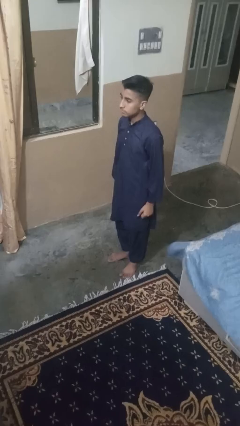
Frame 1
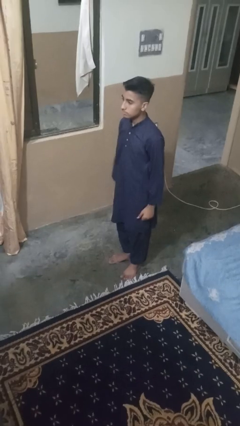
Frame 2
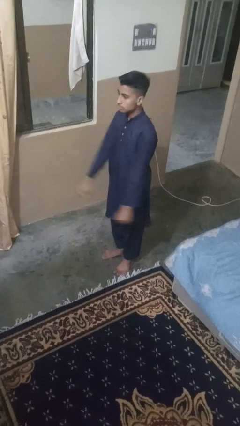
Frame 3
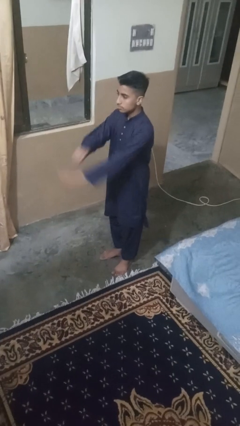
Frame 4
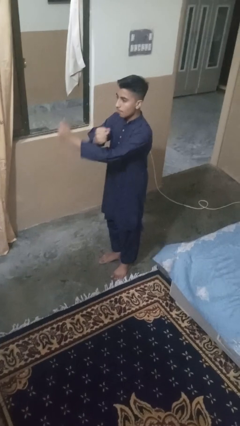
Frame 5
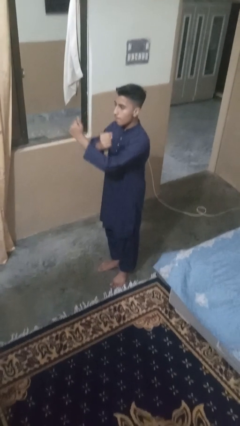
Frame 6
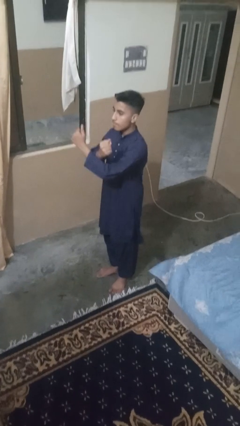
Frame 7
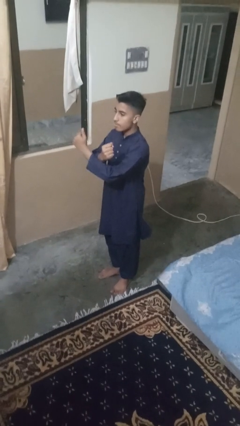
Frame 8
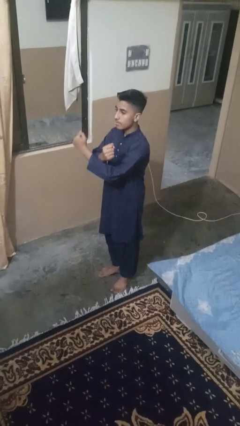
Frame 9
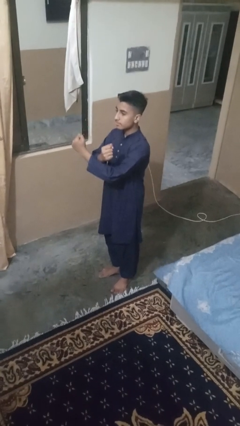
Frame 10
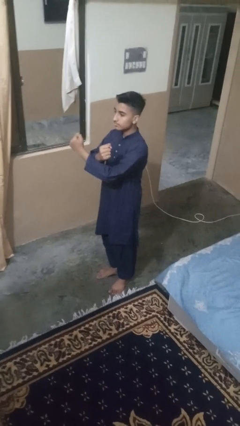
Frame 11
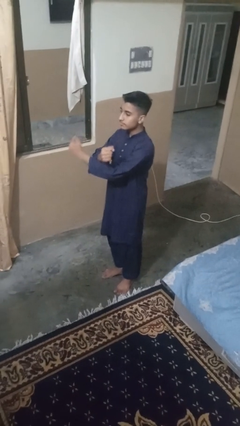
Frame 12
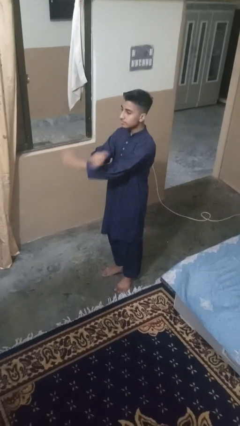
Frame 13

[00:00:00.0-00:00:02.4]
person crosses arms

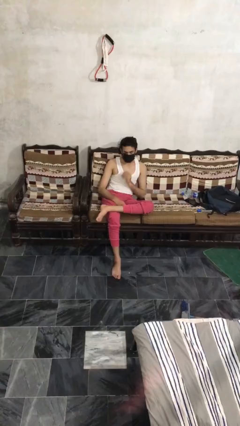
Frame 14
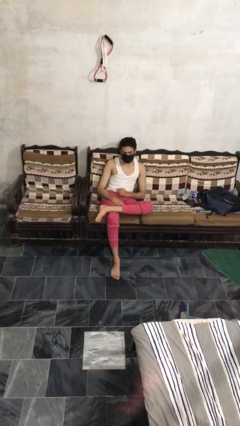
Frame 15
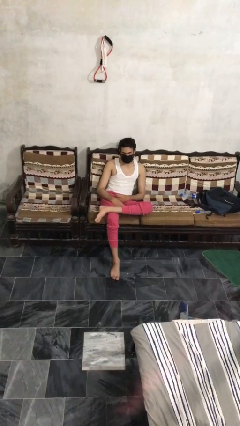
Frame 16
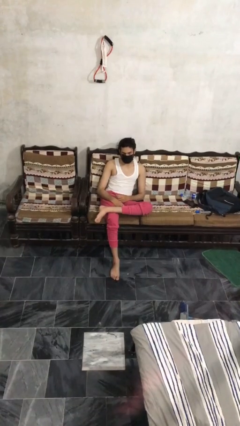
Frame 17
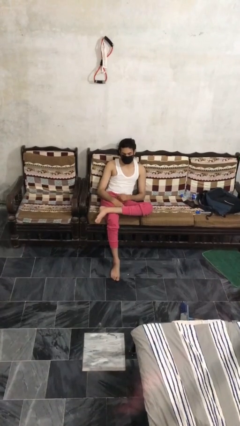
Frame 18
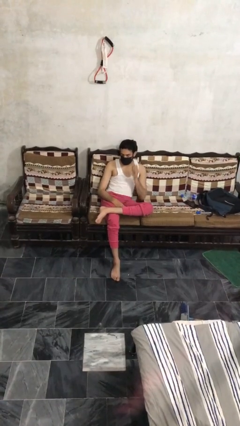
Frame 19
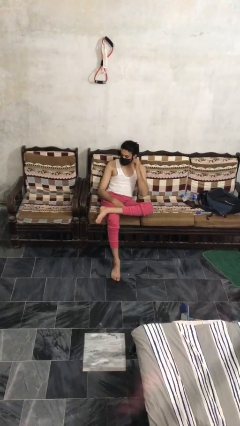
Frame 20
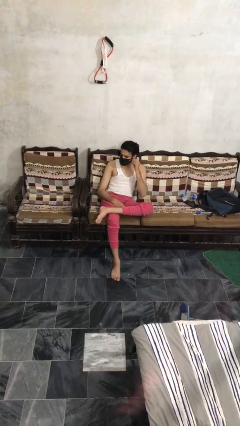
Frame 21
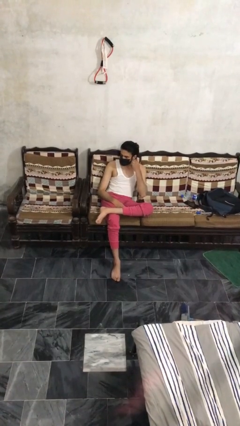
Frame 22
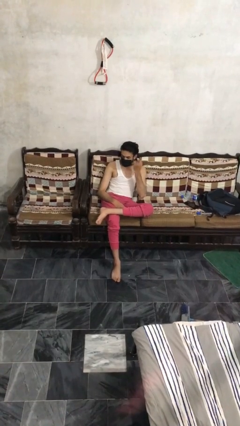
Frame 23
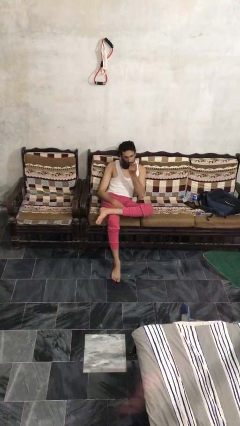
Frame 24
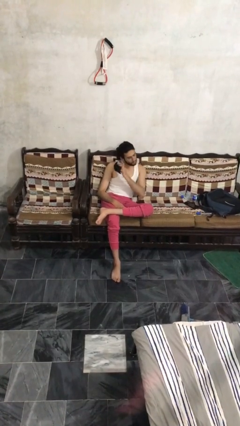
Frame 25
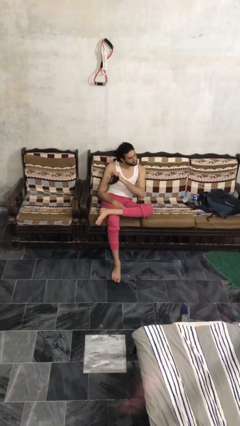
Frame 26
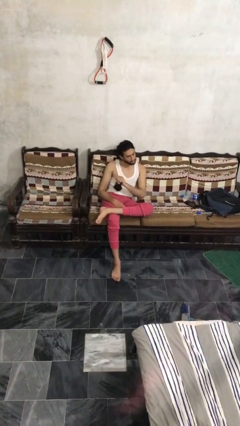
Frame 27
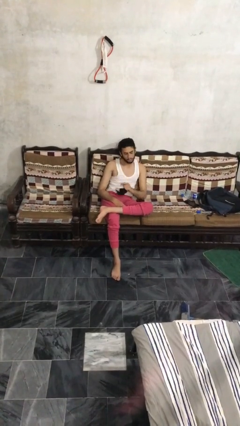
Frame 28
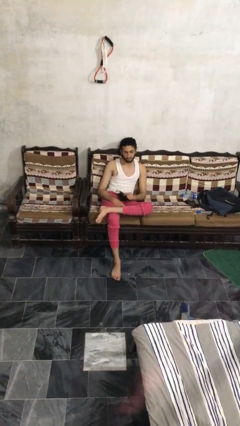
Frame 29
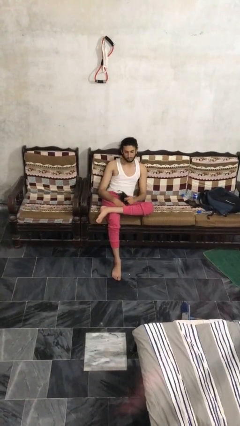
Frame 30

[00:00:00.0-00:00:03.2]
person takes off facemask

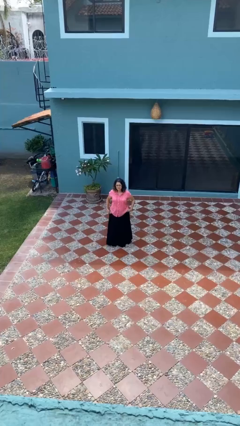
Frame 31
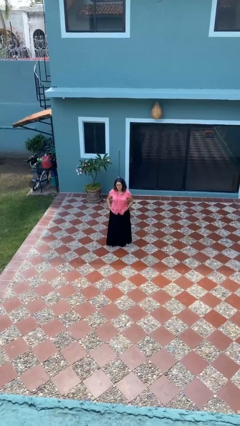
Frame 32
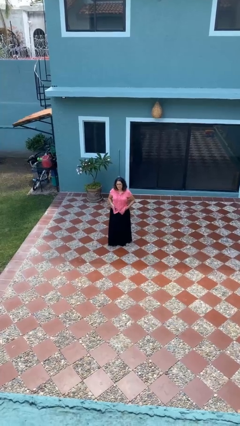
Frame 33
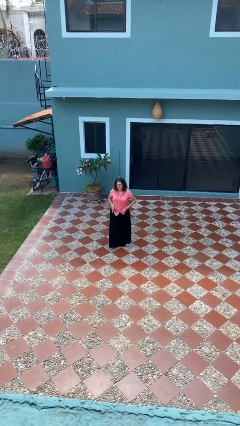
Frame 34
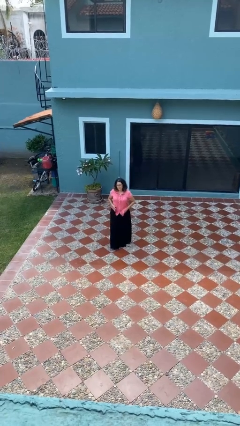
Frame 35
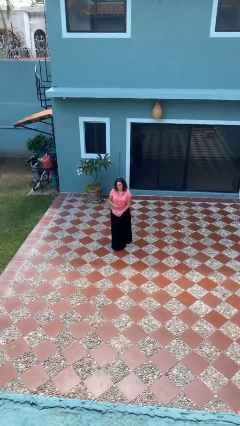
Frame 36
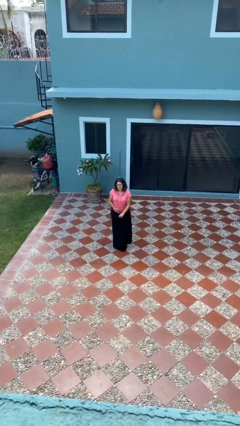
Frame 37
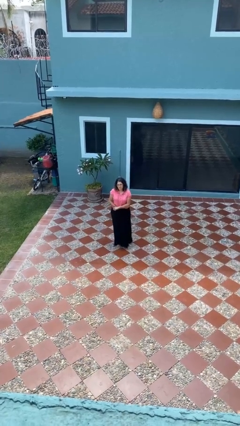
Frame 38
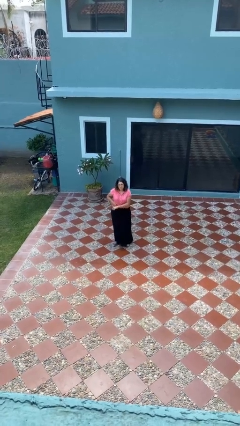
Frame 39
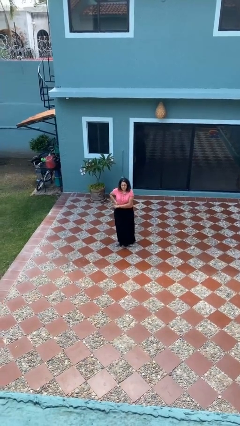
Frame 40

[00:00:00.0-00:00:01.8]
person tucks in shirt

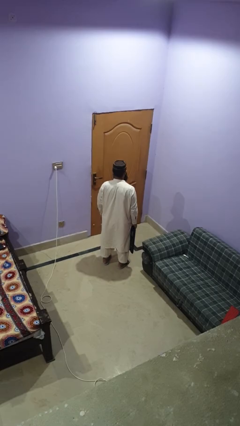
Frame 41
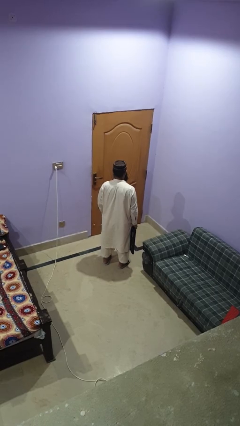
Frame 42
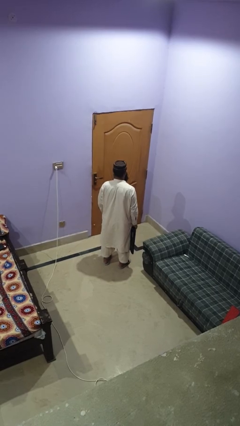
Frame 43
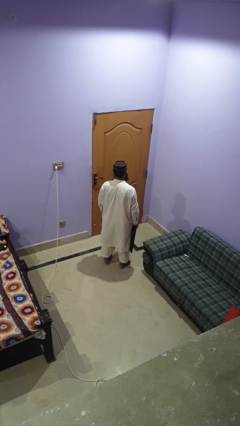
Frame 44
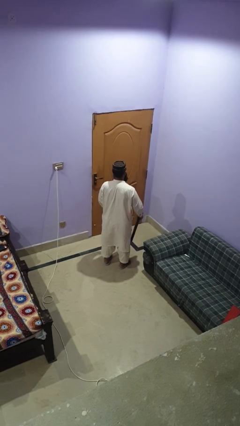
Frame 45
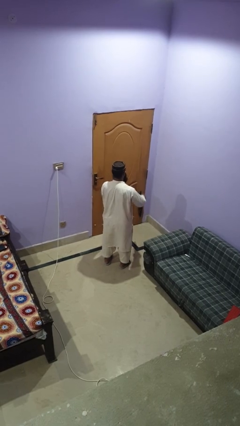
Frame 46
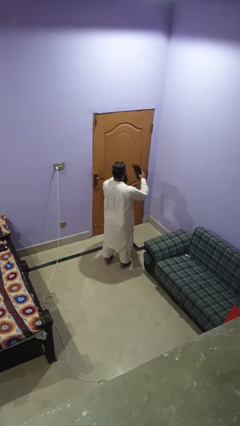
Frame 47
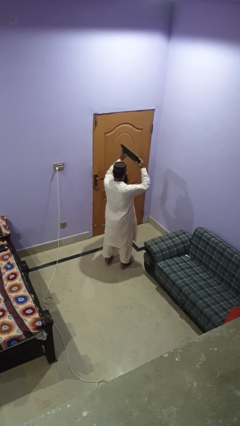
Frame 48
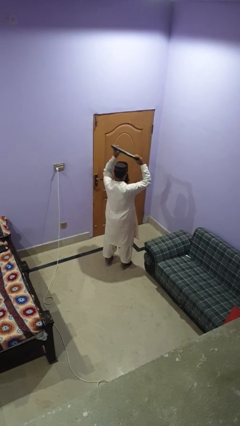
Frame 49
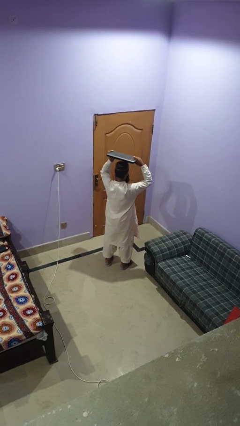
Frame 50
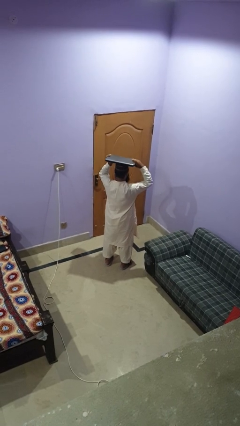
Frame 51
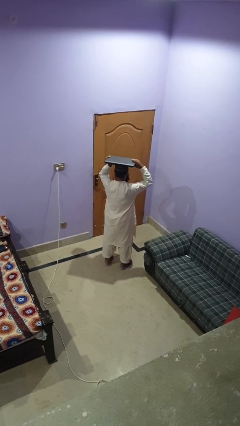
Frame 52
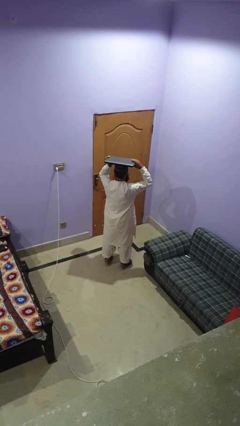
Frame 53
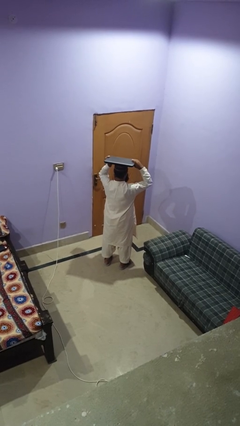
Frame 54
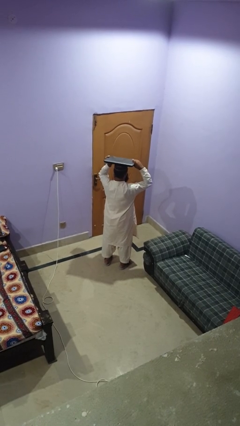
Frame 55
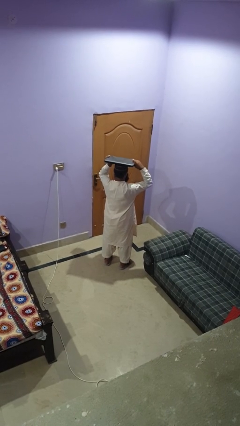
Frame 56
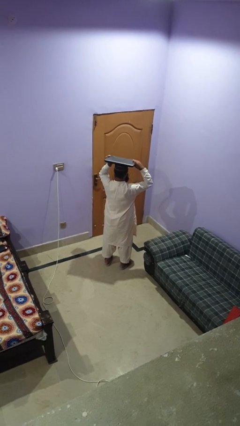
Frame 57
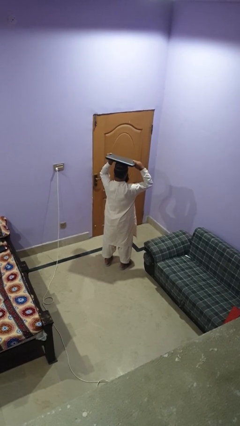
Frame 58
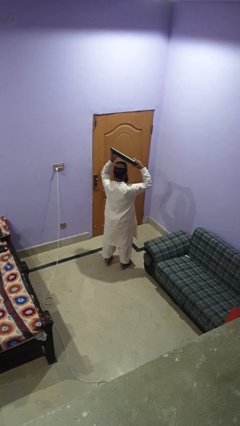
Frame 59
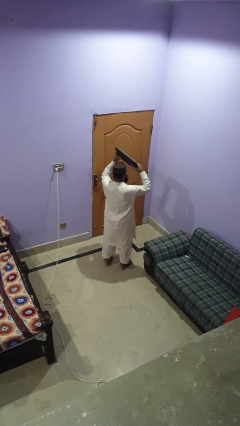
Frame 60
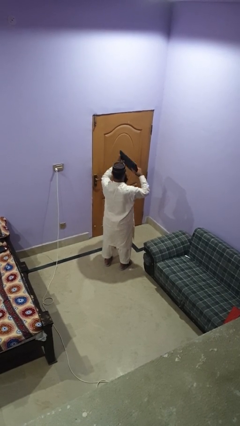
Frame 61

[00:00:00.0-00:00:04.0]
person holds object above head

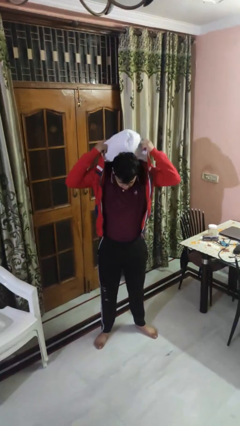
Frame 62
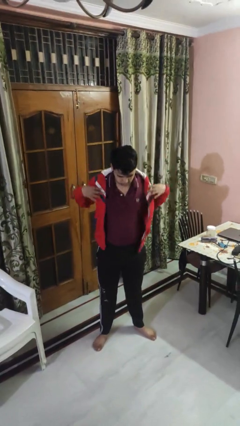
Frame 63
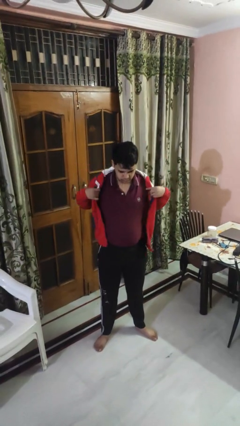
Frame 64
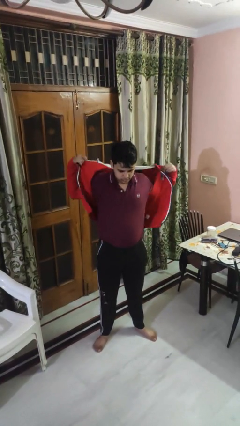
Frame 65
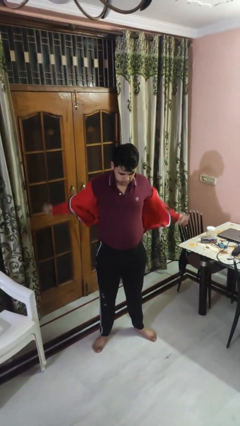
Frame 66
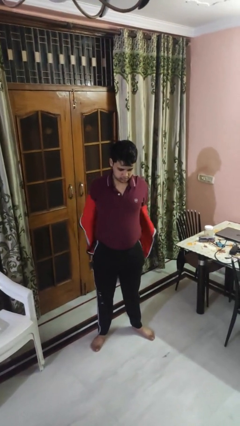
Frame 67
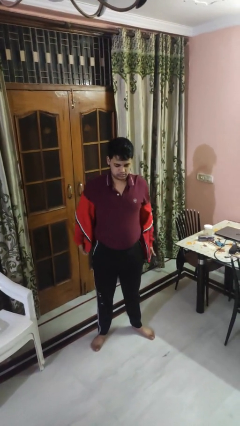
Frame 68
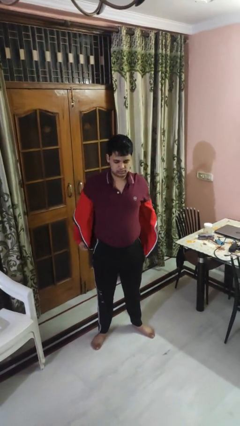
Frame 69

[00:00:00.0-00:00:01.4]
person takes off hoodie

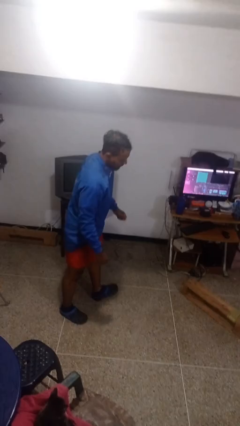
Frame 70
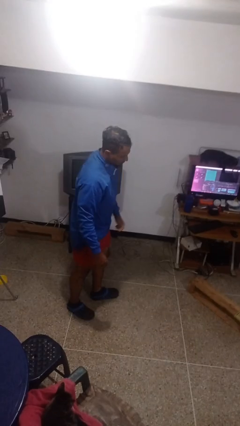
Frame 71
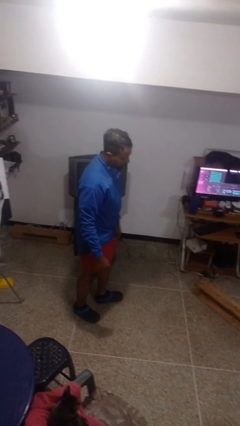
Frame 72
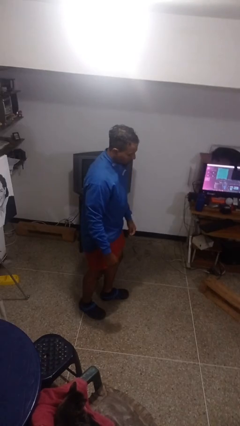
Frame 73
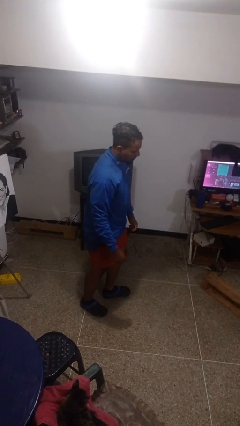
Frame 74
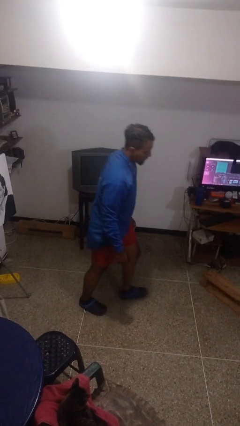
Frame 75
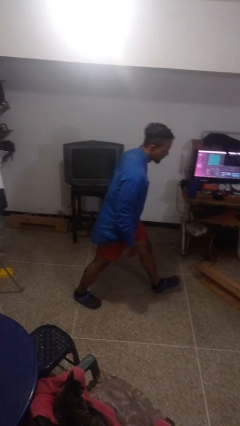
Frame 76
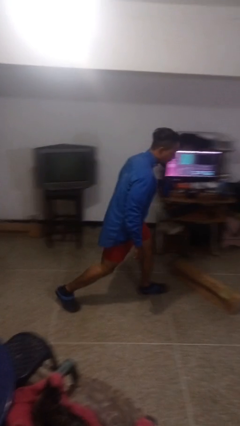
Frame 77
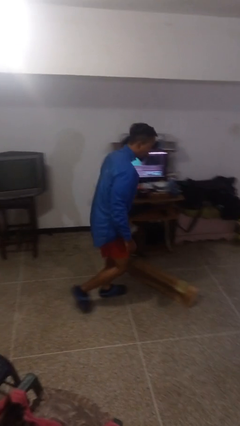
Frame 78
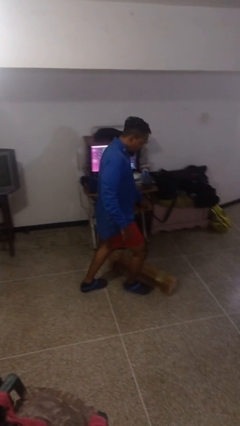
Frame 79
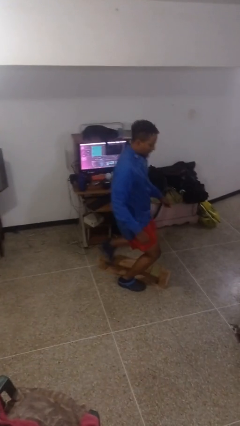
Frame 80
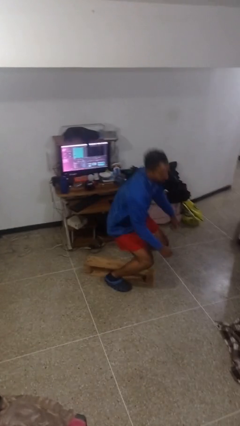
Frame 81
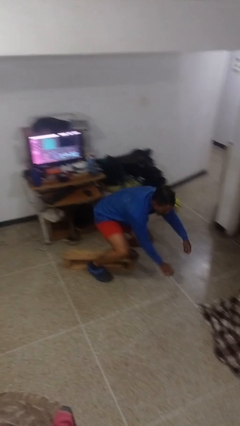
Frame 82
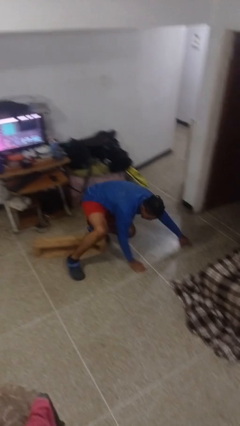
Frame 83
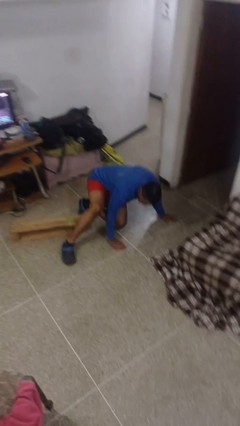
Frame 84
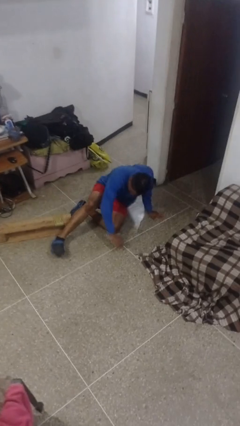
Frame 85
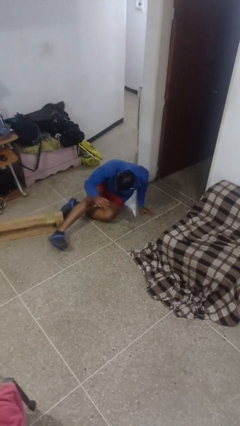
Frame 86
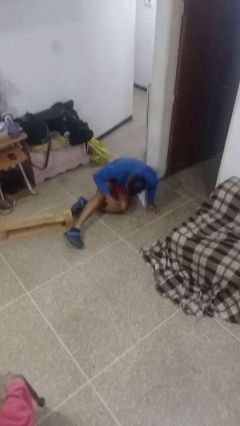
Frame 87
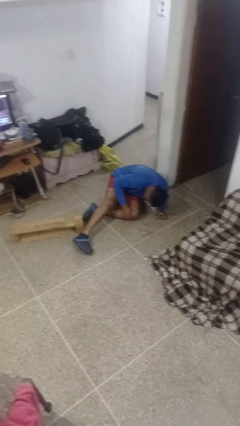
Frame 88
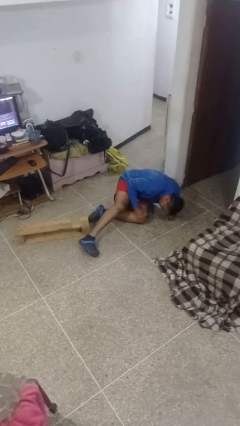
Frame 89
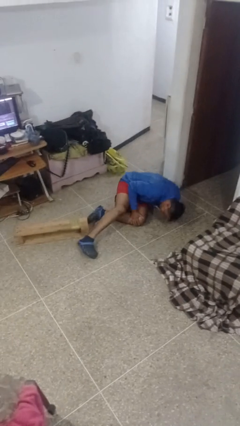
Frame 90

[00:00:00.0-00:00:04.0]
person trips on object on floor

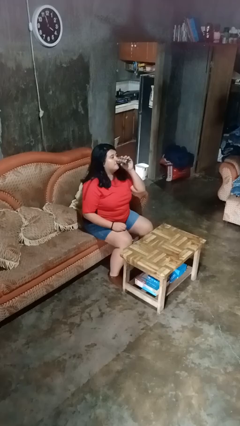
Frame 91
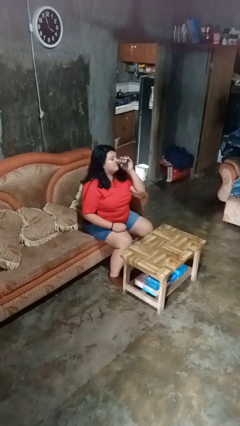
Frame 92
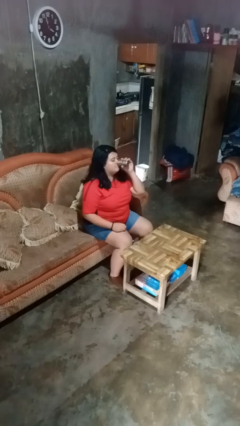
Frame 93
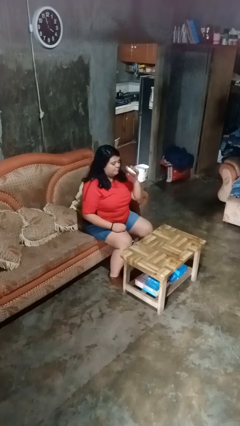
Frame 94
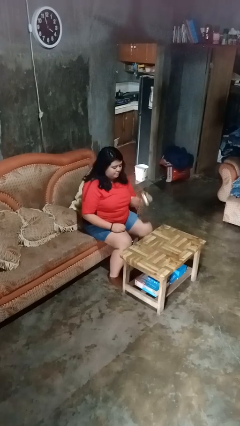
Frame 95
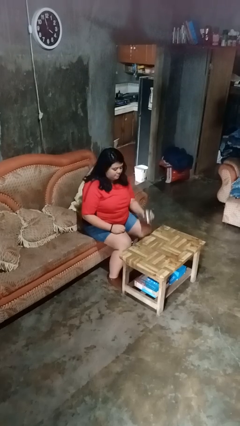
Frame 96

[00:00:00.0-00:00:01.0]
person drinks from beverage can
